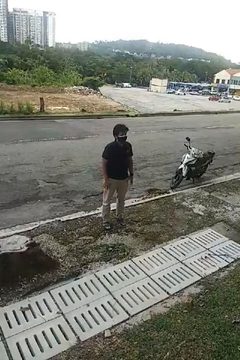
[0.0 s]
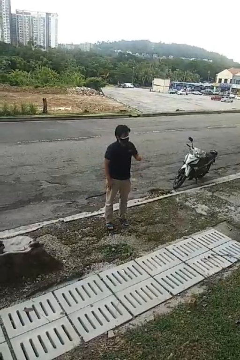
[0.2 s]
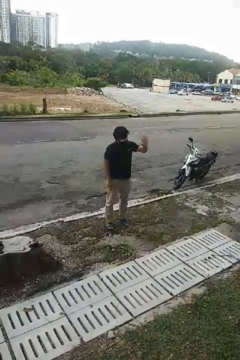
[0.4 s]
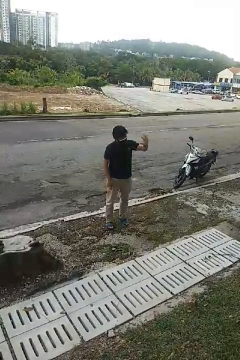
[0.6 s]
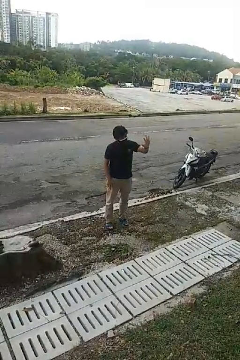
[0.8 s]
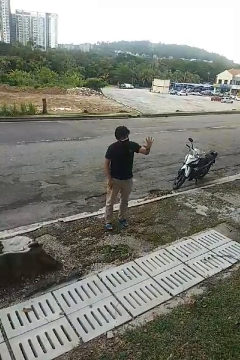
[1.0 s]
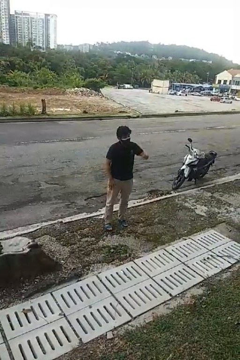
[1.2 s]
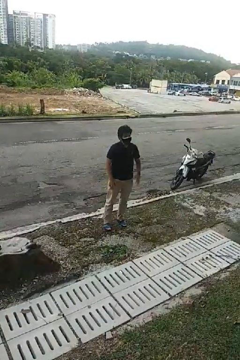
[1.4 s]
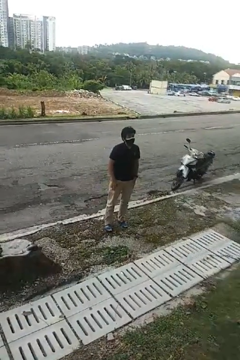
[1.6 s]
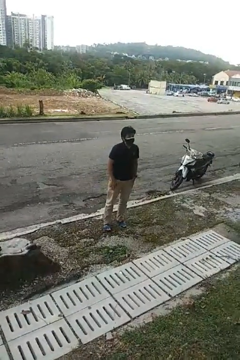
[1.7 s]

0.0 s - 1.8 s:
person gestures number five

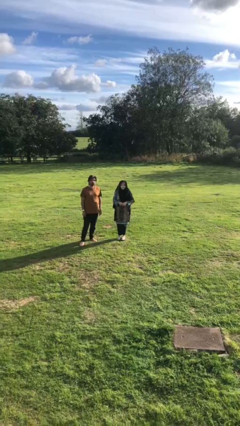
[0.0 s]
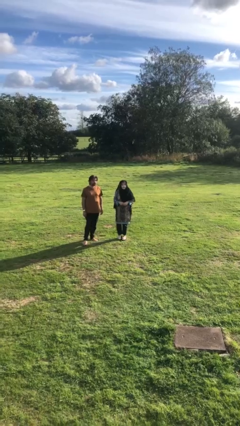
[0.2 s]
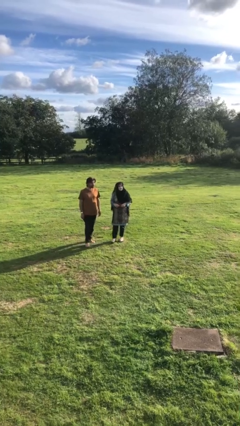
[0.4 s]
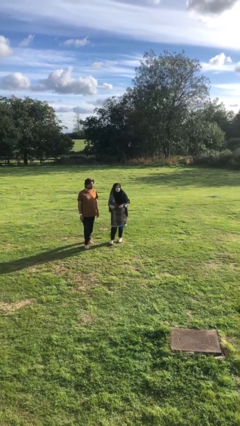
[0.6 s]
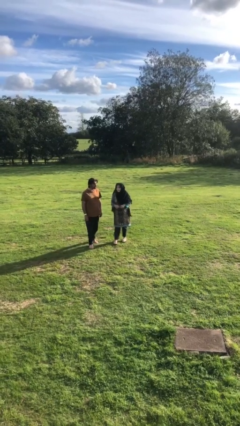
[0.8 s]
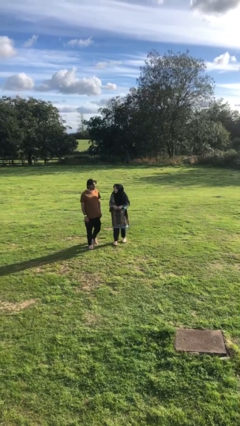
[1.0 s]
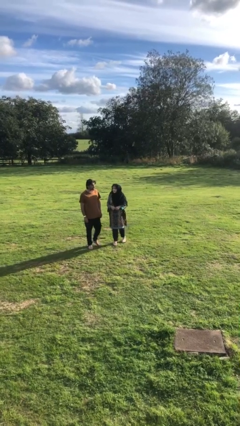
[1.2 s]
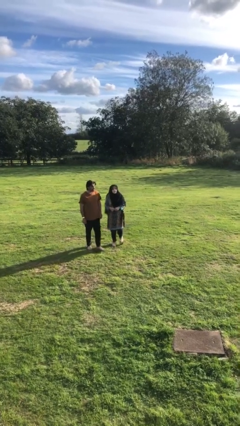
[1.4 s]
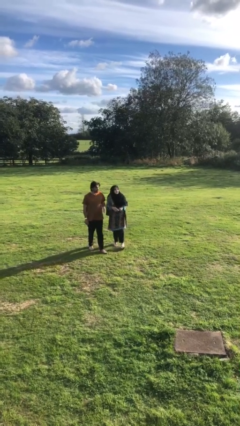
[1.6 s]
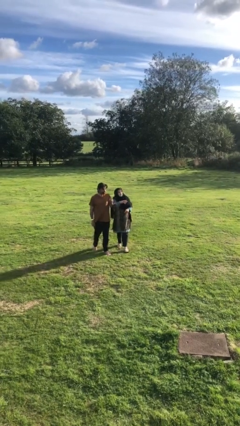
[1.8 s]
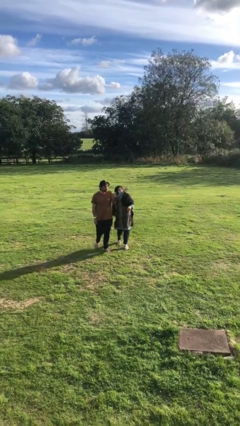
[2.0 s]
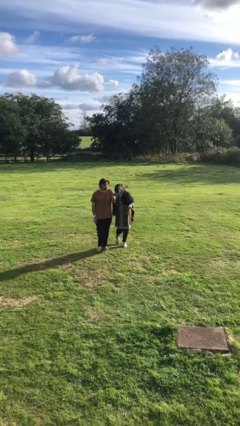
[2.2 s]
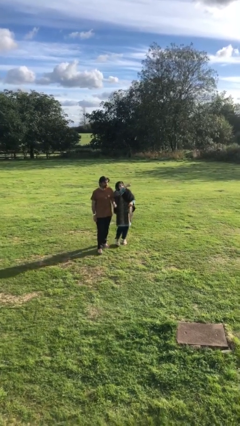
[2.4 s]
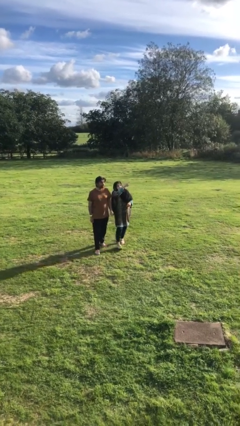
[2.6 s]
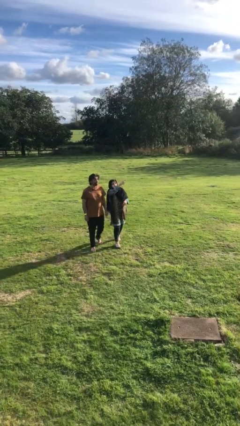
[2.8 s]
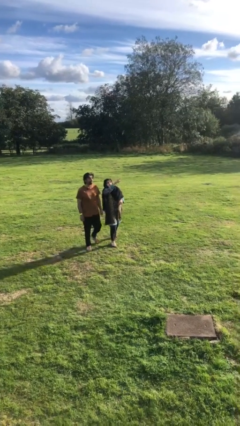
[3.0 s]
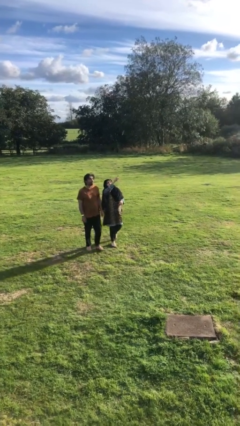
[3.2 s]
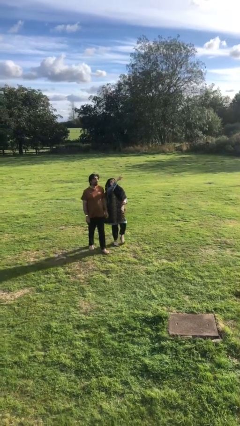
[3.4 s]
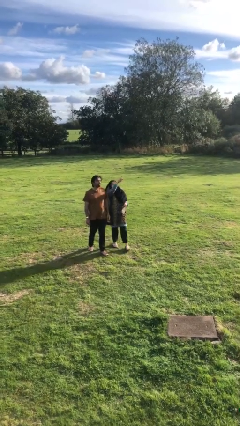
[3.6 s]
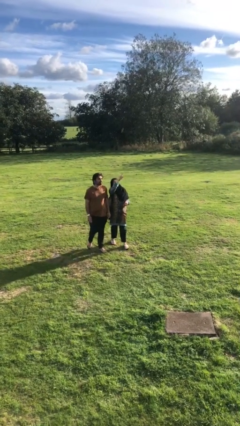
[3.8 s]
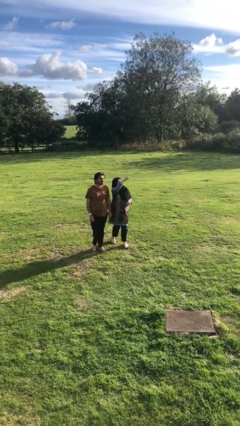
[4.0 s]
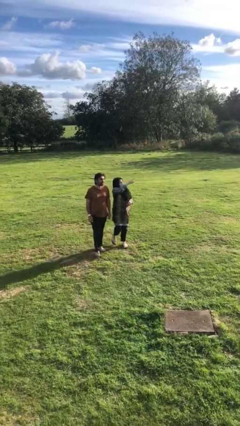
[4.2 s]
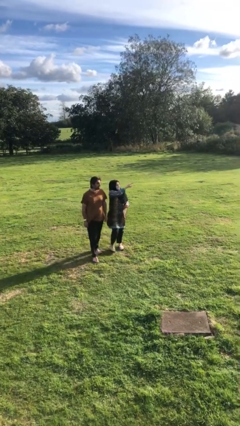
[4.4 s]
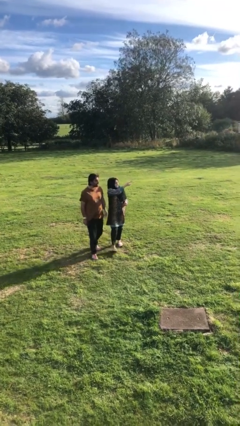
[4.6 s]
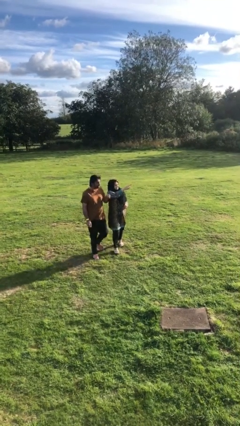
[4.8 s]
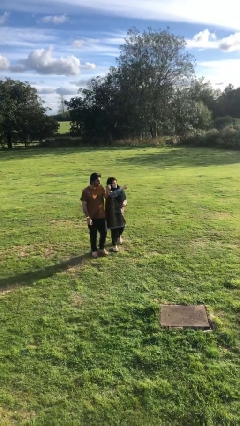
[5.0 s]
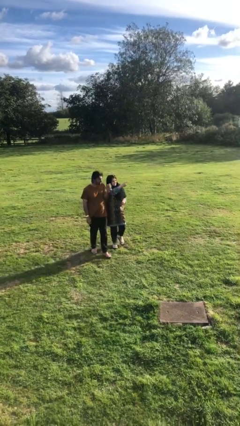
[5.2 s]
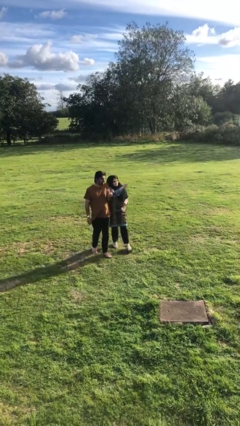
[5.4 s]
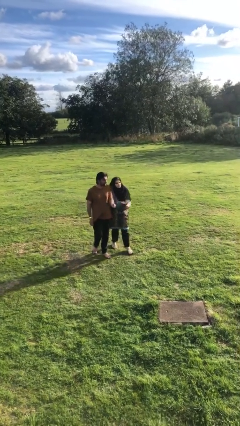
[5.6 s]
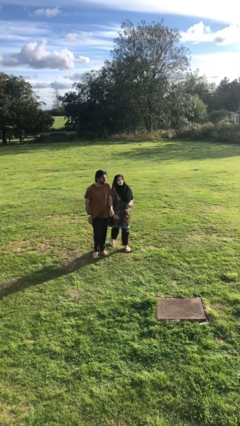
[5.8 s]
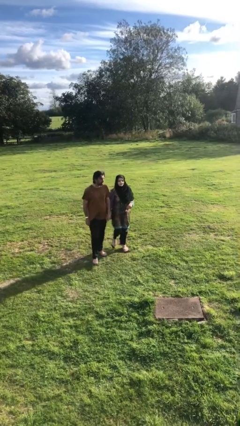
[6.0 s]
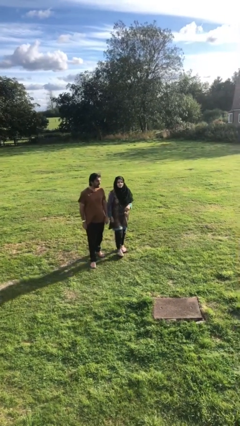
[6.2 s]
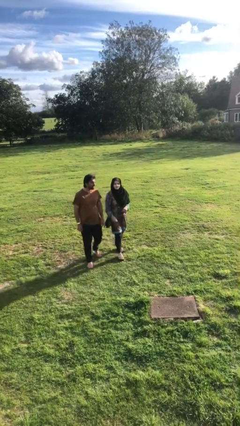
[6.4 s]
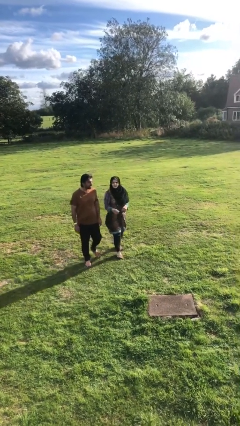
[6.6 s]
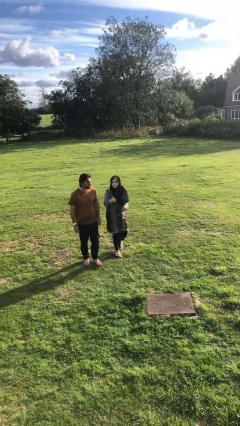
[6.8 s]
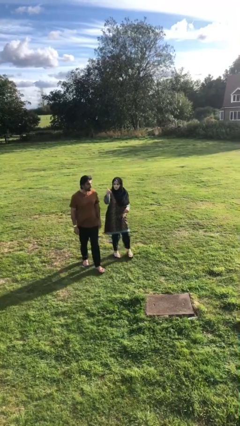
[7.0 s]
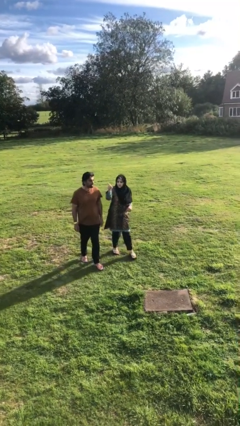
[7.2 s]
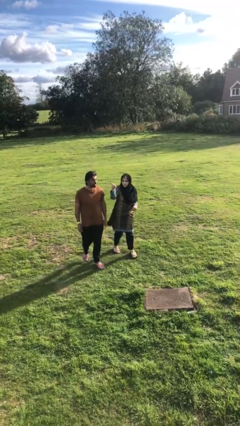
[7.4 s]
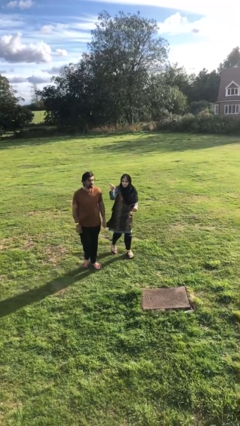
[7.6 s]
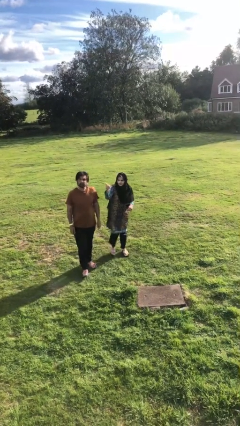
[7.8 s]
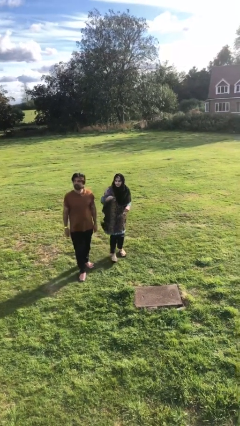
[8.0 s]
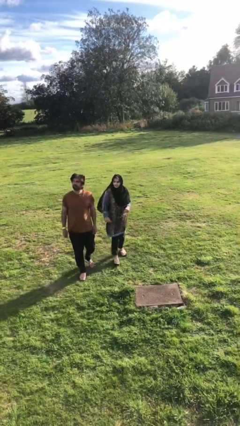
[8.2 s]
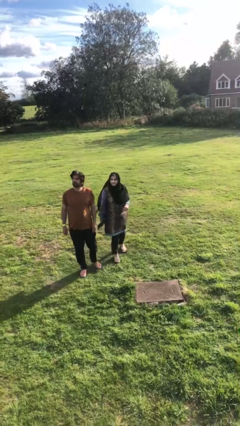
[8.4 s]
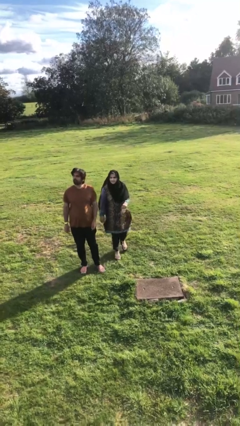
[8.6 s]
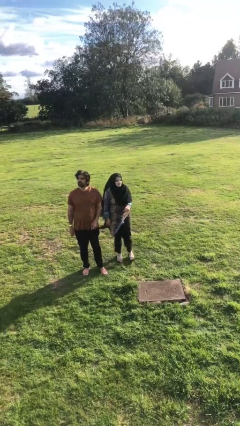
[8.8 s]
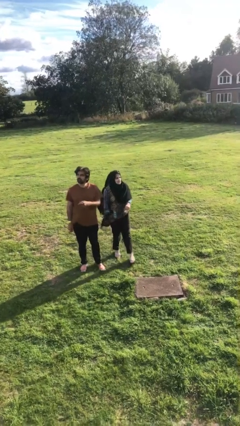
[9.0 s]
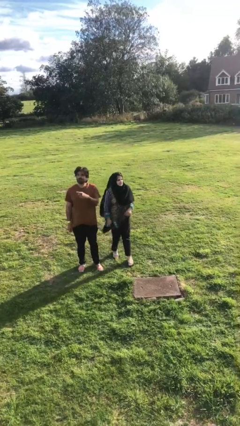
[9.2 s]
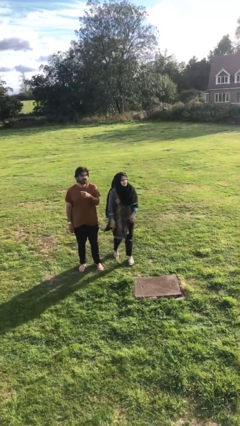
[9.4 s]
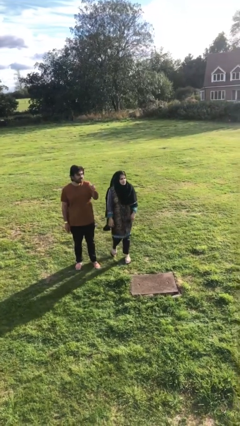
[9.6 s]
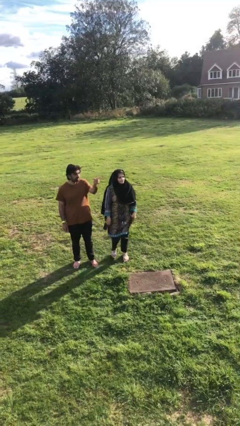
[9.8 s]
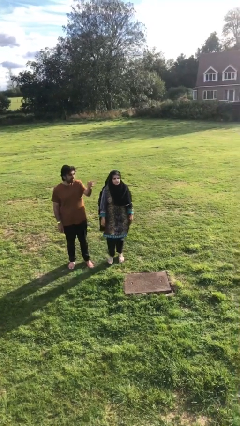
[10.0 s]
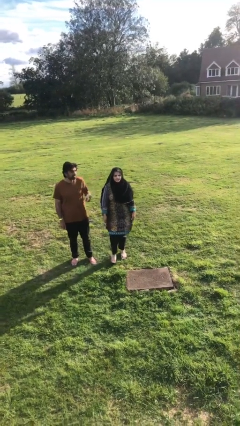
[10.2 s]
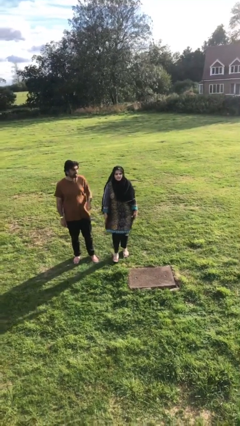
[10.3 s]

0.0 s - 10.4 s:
person talks to person

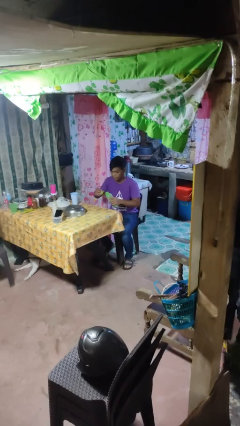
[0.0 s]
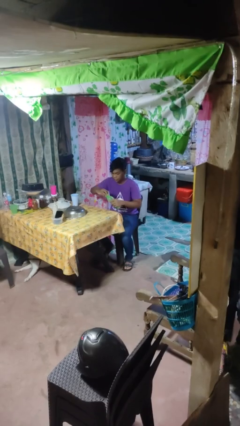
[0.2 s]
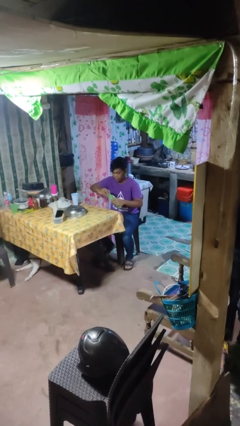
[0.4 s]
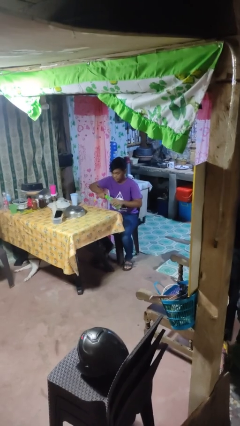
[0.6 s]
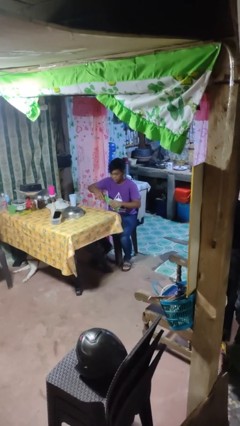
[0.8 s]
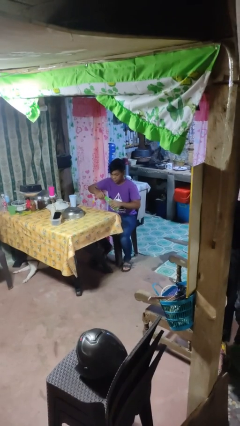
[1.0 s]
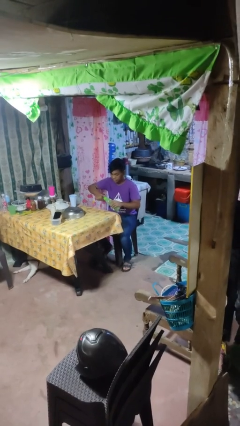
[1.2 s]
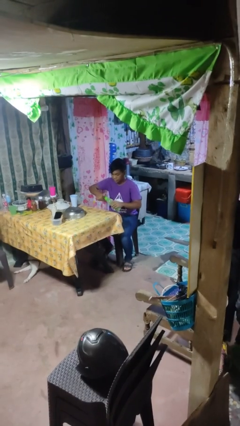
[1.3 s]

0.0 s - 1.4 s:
person screws lid to bottle

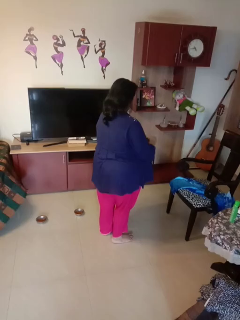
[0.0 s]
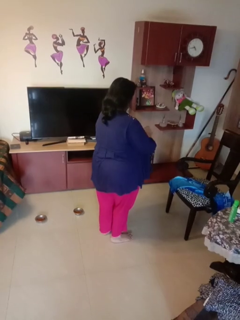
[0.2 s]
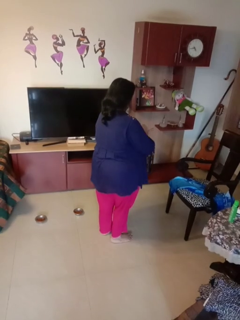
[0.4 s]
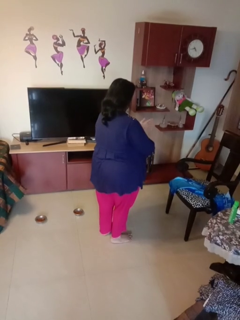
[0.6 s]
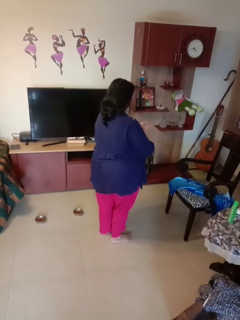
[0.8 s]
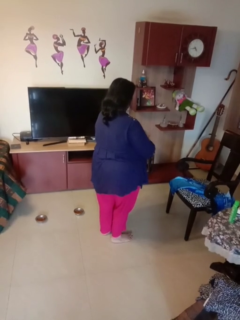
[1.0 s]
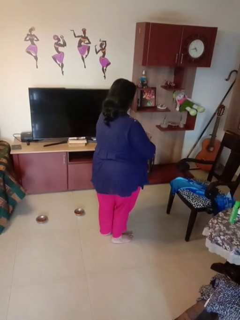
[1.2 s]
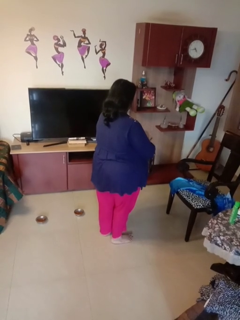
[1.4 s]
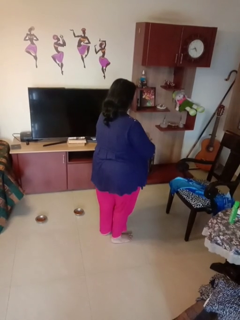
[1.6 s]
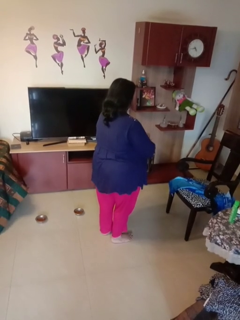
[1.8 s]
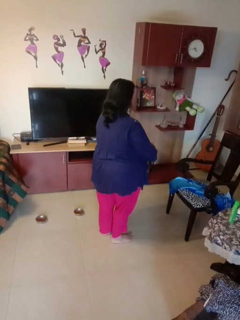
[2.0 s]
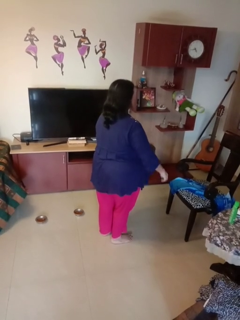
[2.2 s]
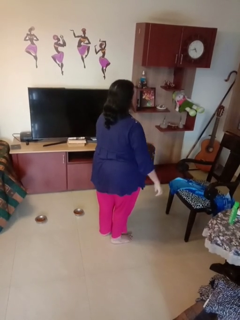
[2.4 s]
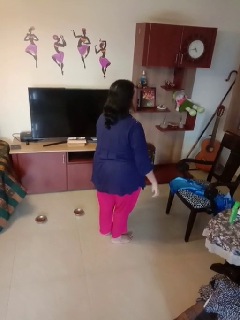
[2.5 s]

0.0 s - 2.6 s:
person puts on wristwatch

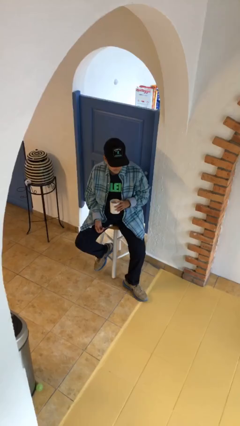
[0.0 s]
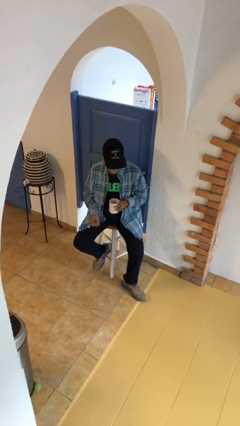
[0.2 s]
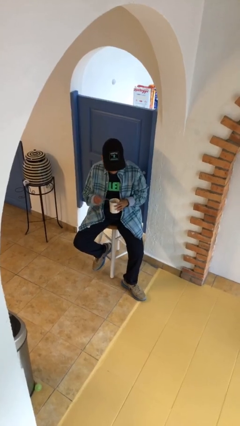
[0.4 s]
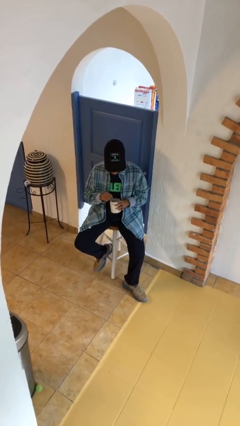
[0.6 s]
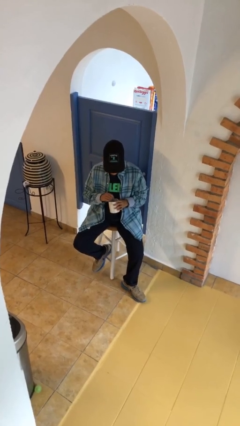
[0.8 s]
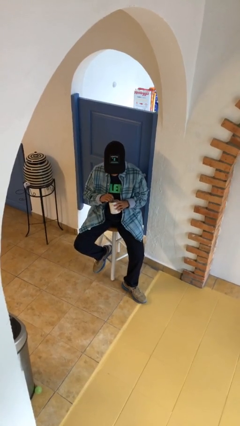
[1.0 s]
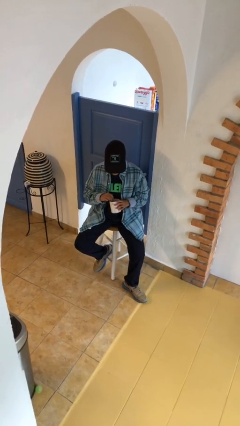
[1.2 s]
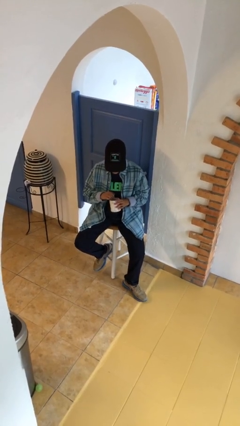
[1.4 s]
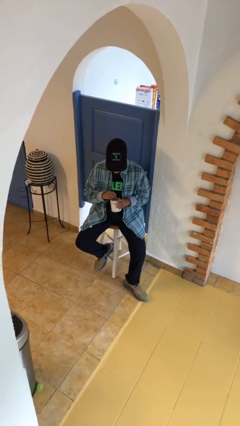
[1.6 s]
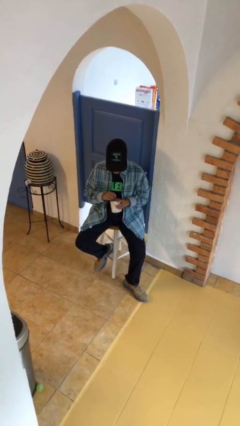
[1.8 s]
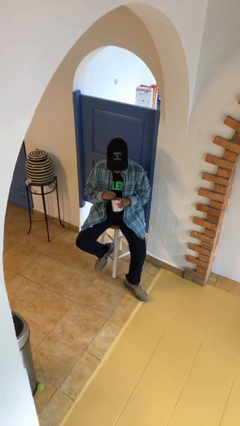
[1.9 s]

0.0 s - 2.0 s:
person stirs mug

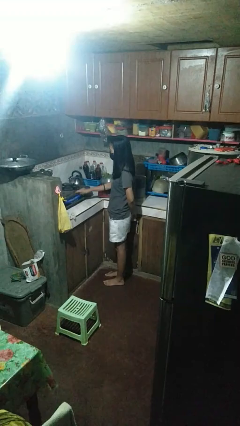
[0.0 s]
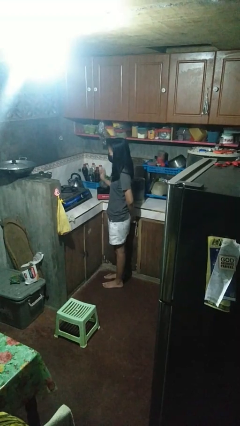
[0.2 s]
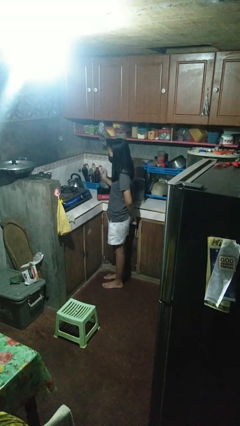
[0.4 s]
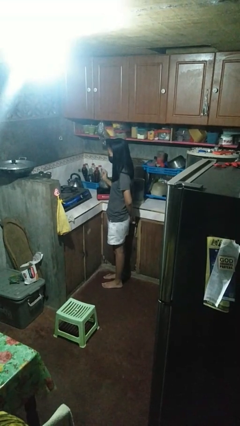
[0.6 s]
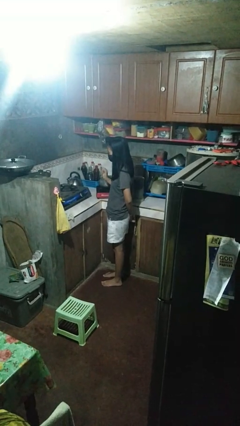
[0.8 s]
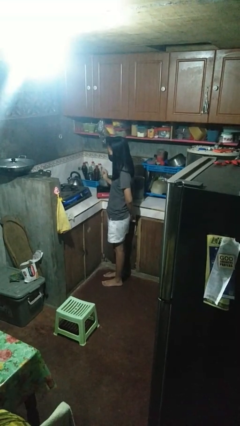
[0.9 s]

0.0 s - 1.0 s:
person burns hand
